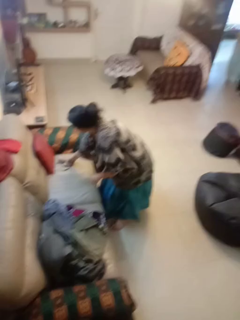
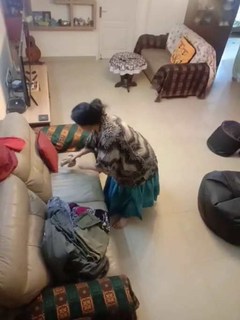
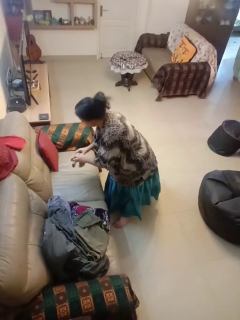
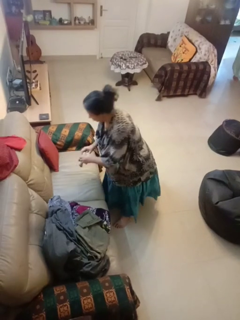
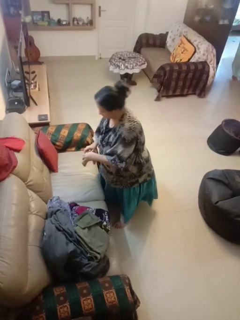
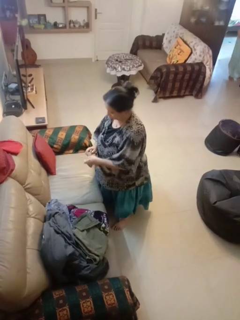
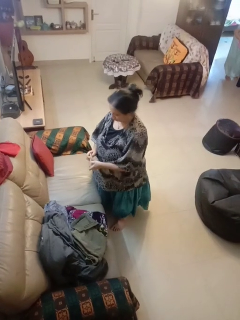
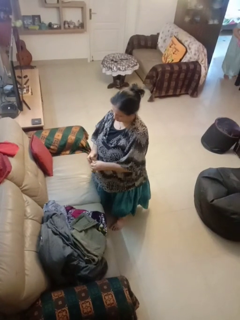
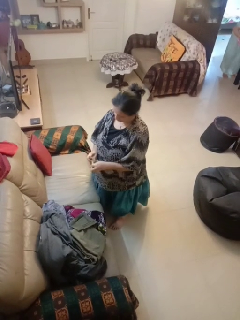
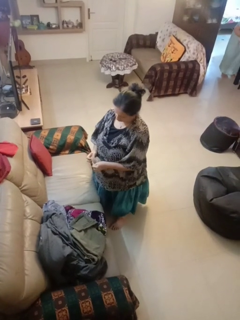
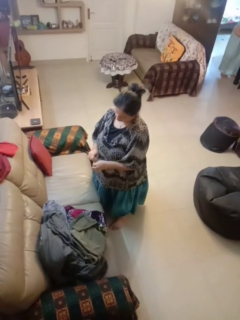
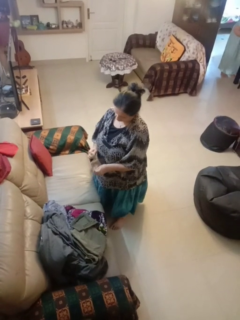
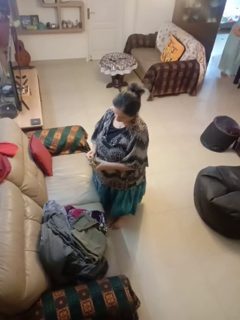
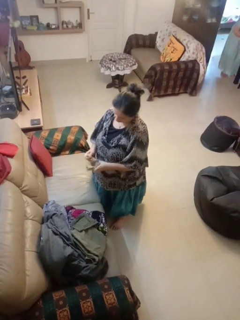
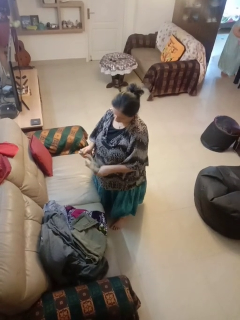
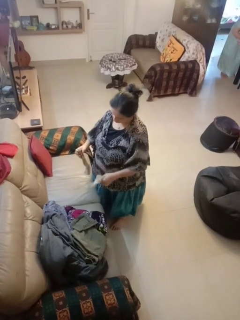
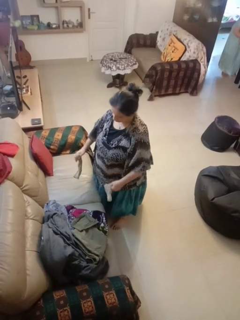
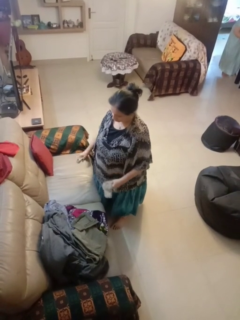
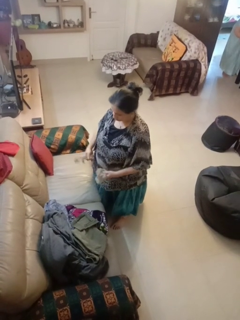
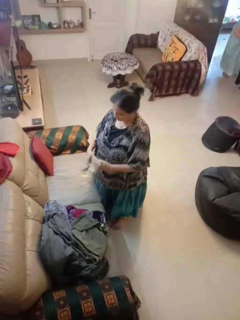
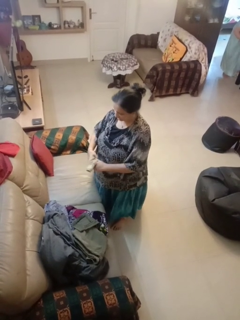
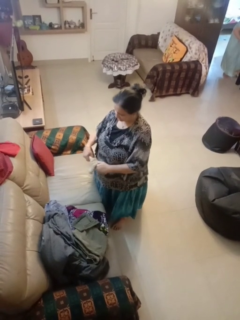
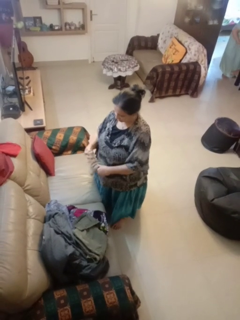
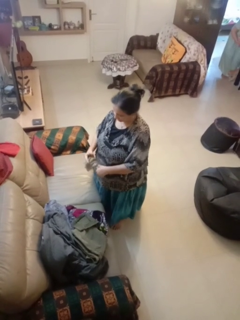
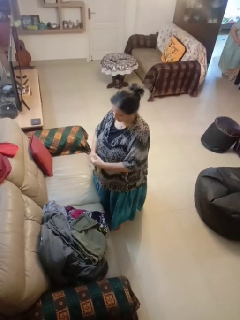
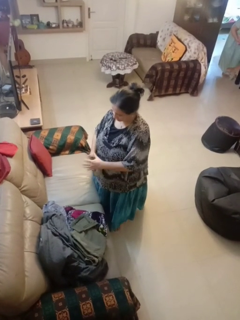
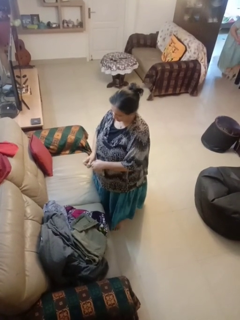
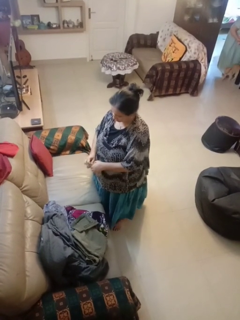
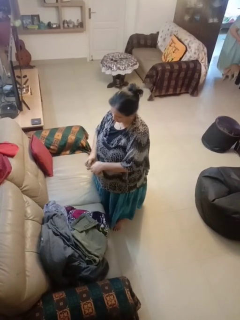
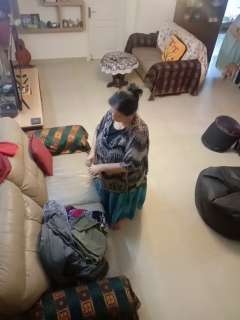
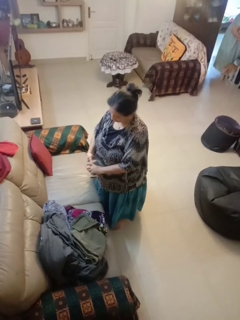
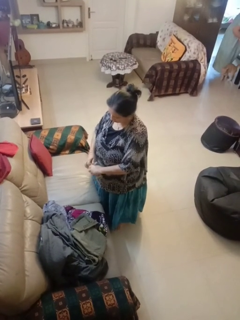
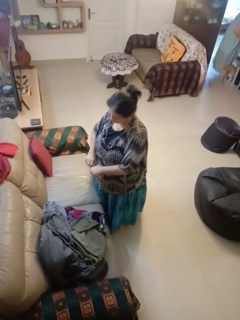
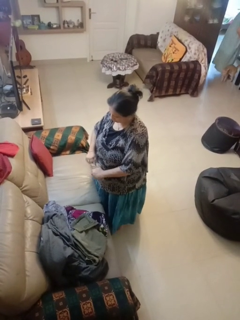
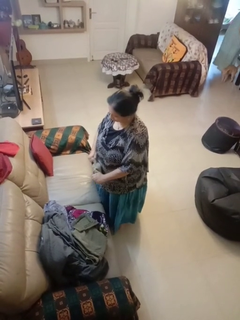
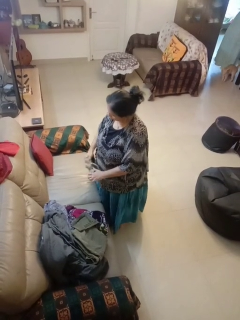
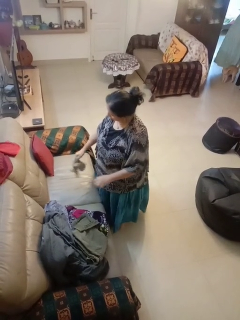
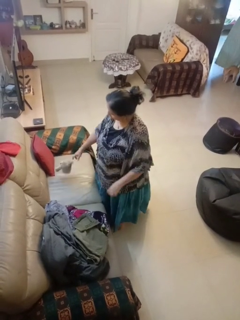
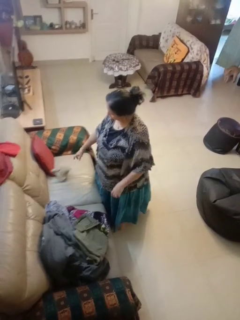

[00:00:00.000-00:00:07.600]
person folds socks

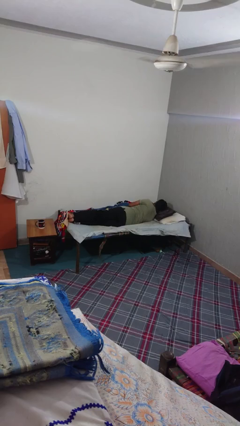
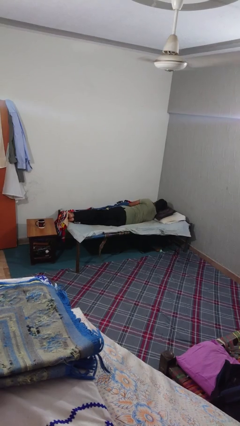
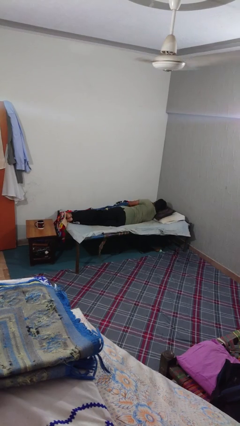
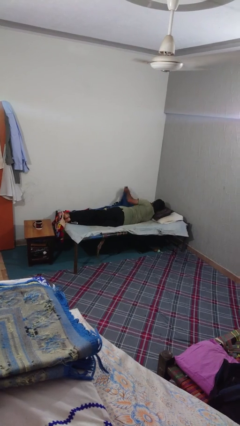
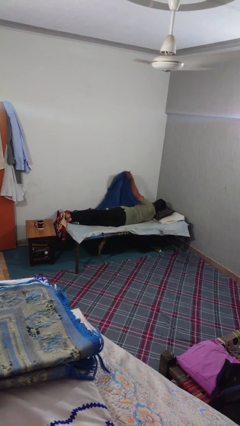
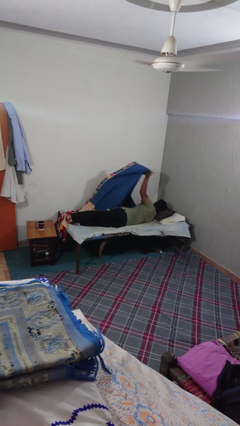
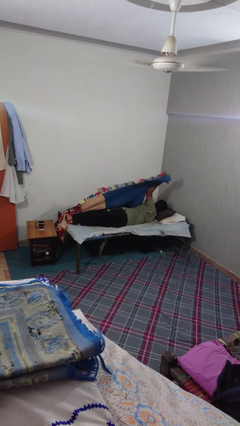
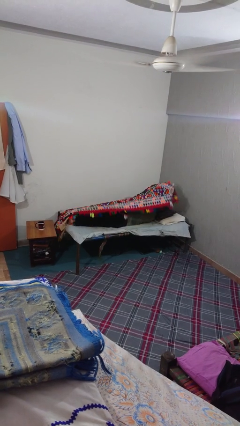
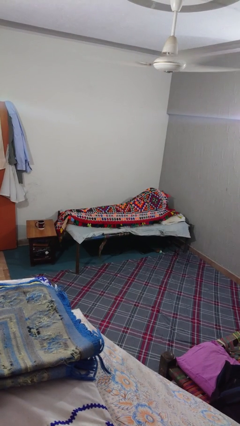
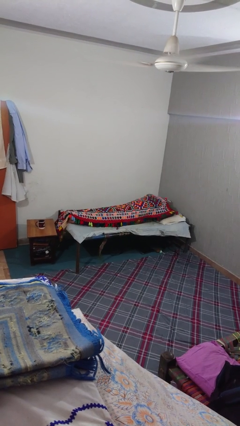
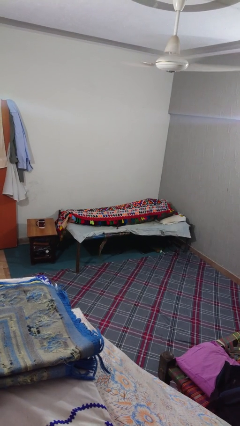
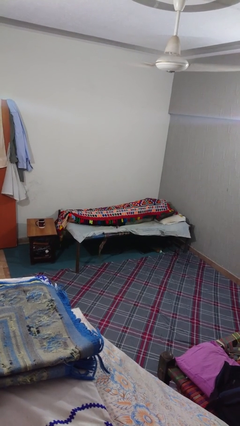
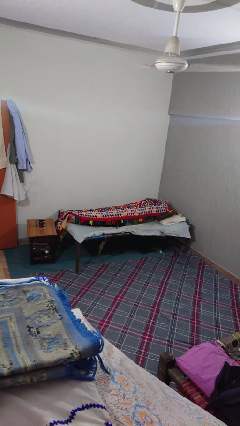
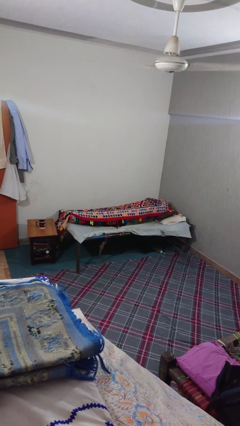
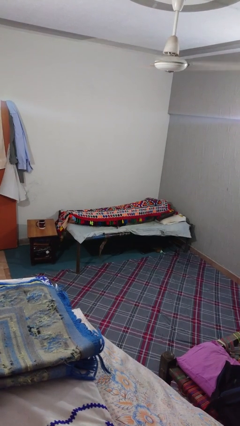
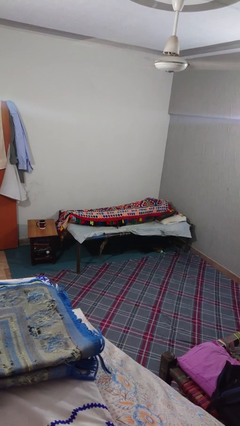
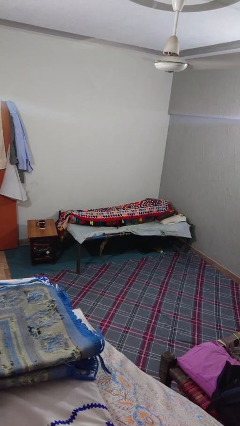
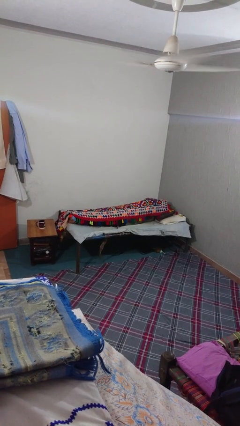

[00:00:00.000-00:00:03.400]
person covers with blanket

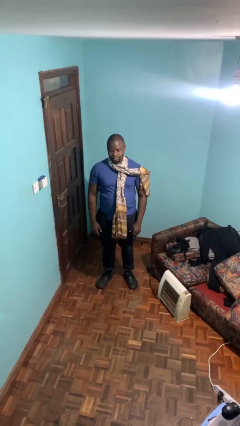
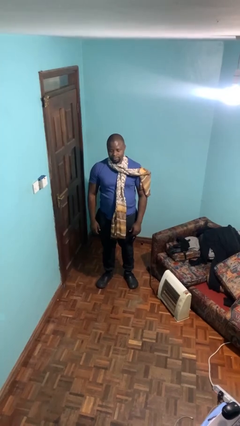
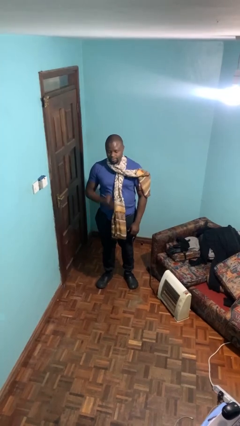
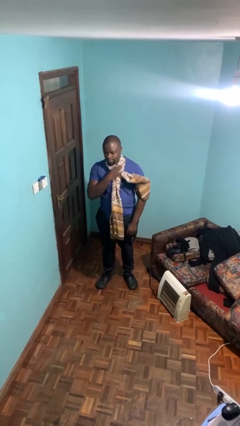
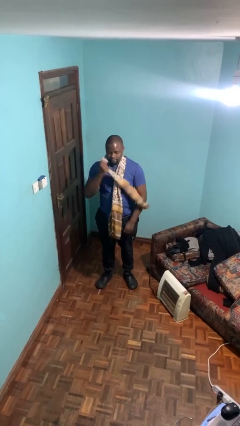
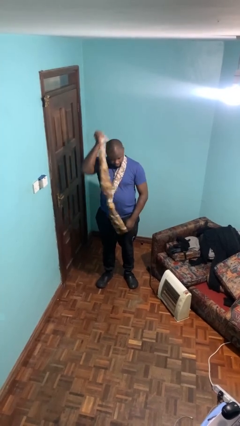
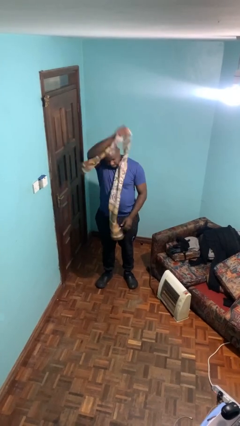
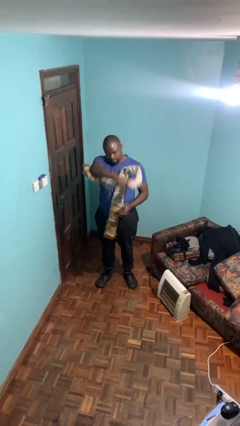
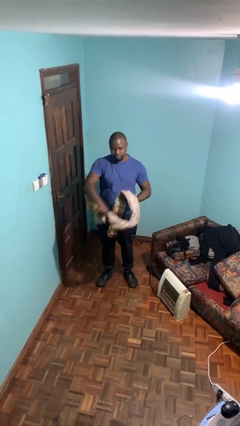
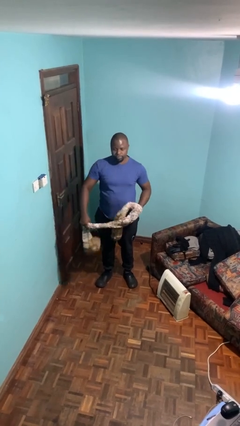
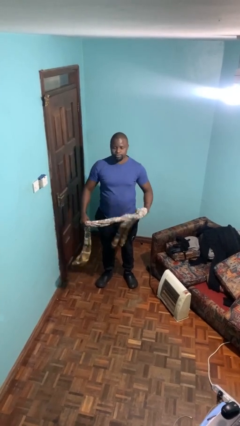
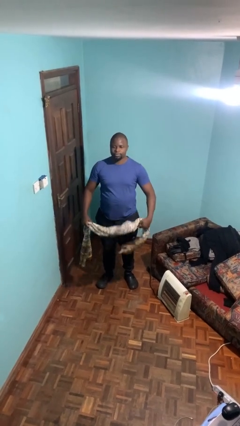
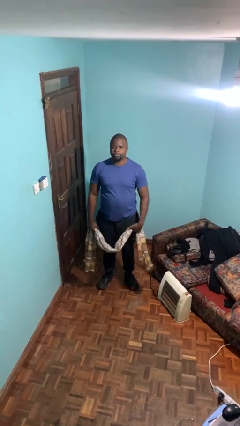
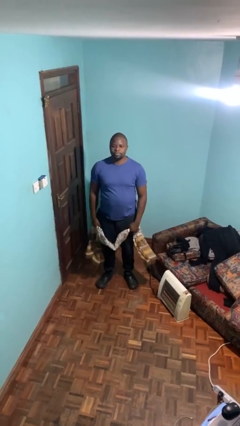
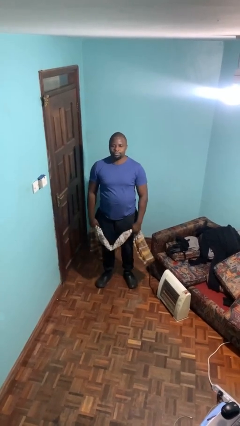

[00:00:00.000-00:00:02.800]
person takes off scarf

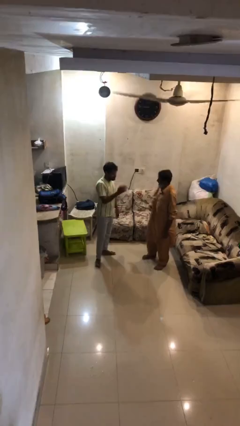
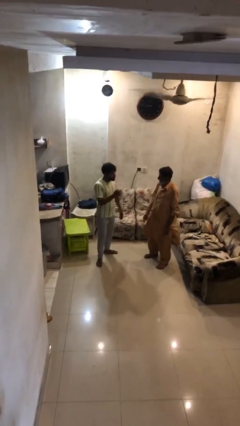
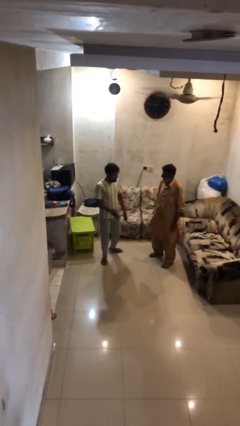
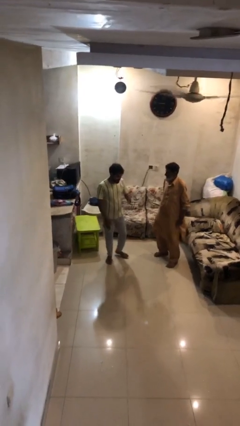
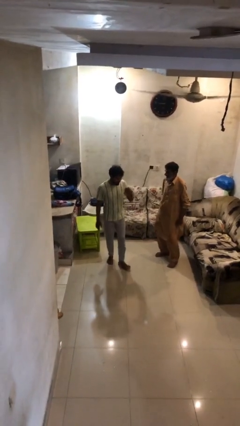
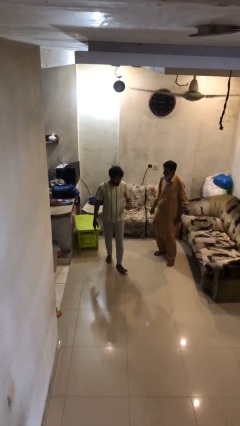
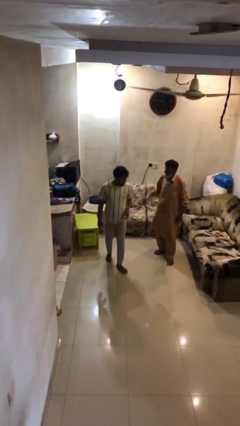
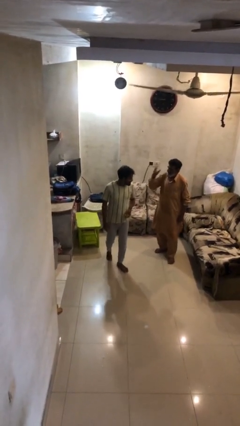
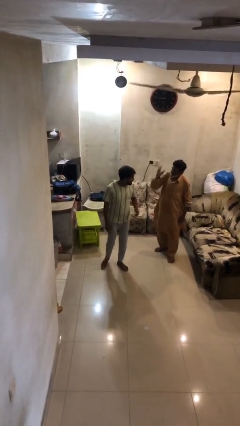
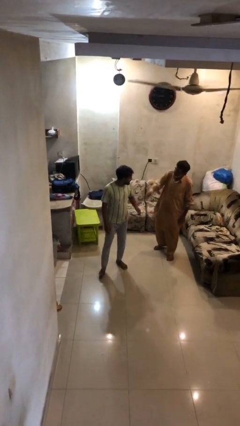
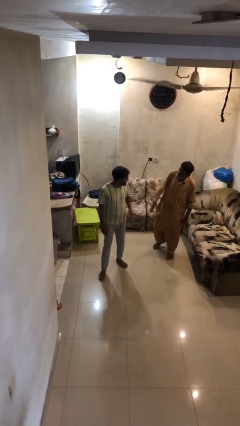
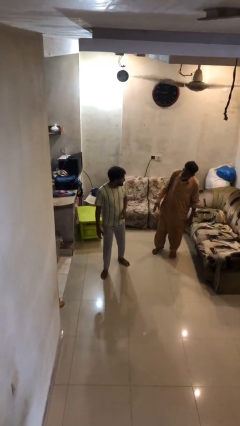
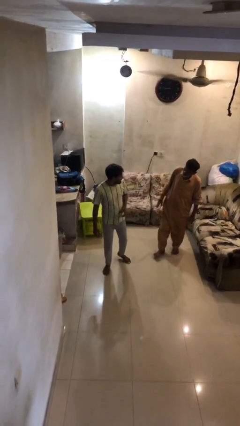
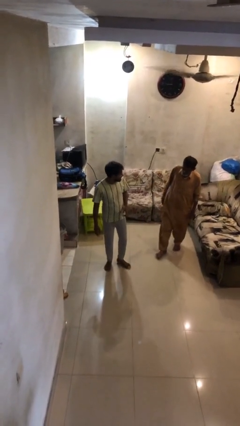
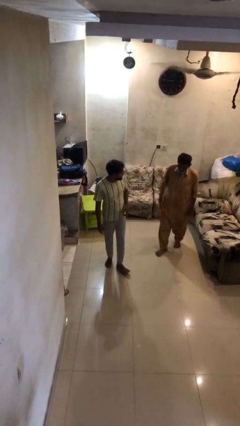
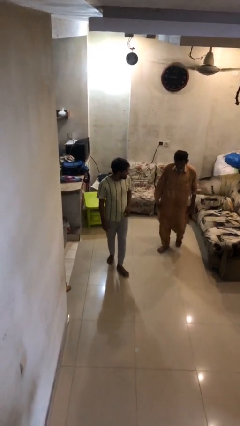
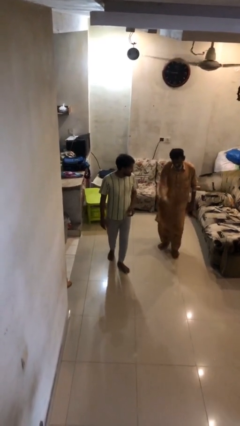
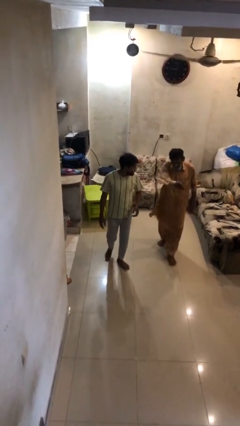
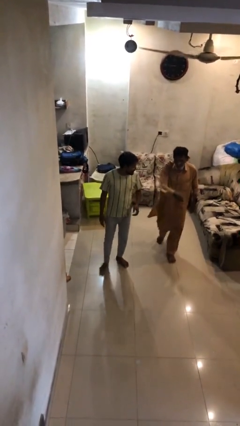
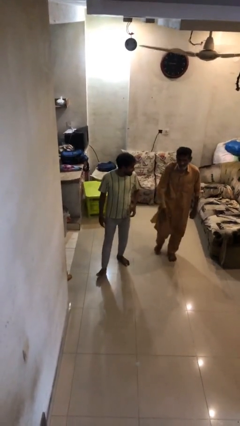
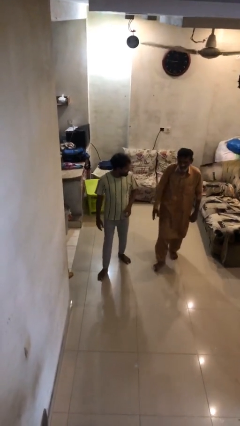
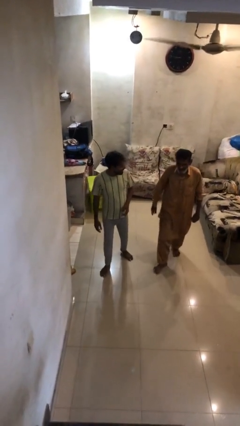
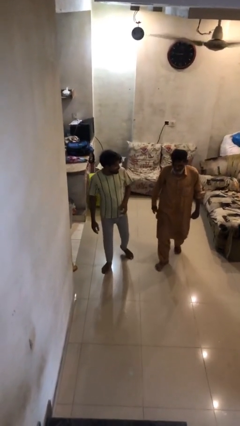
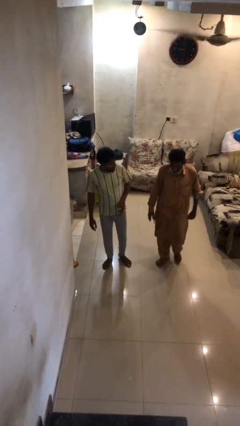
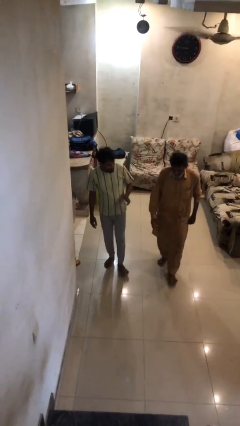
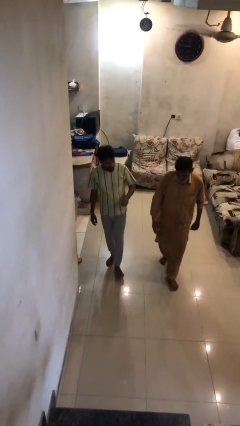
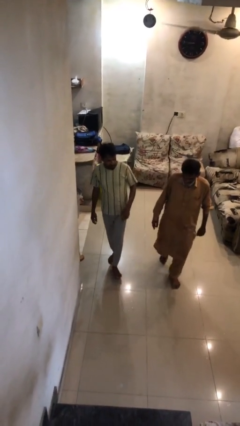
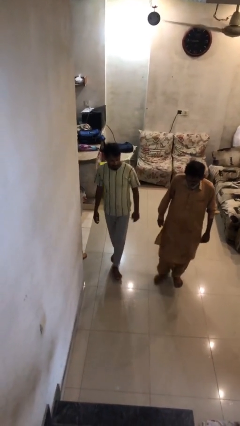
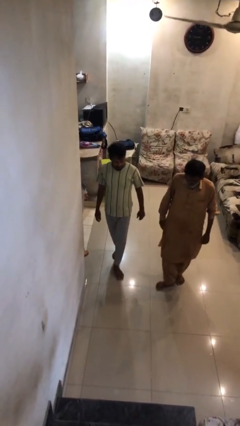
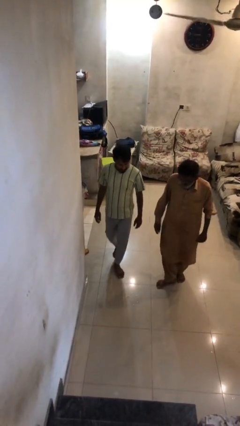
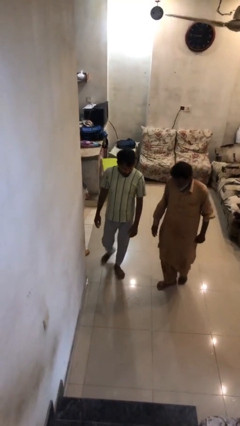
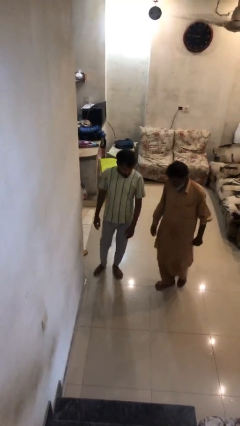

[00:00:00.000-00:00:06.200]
person talks to person
